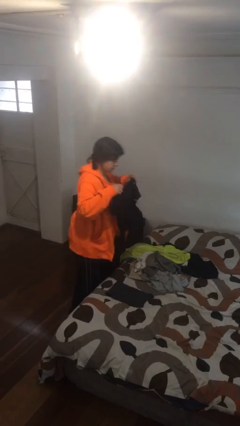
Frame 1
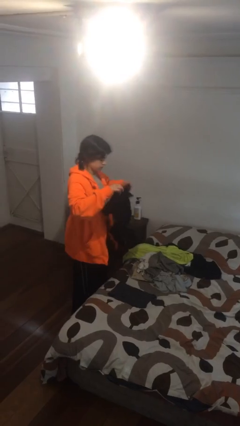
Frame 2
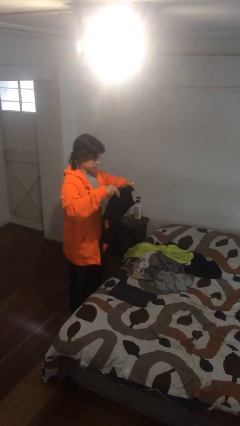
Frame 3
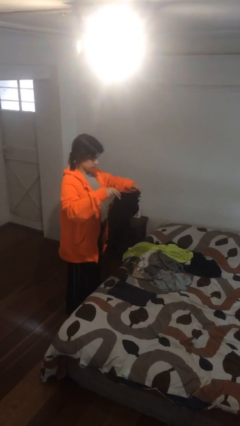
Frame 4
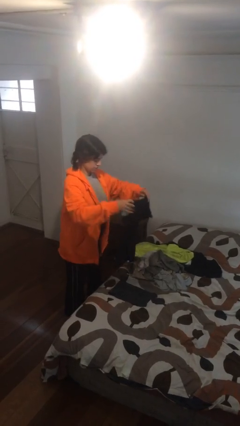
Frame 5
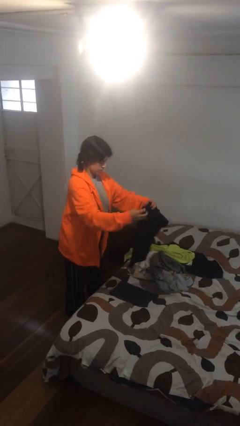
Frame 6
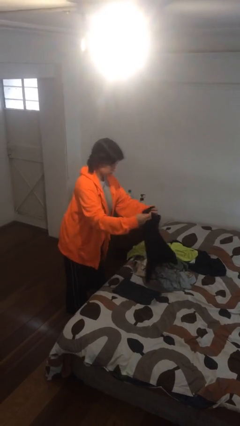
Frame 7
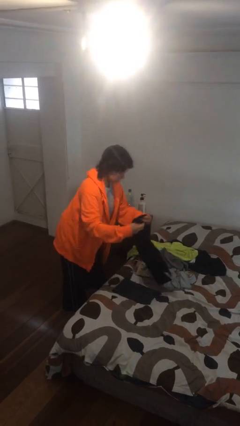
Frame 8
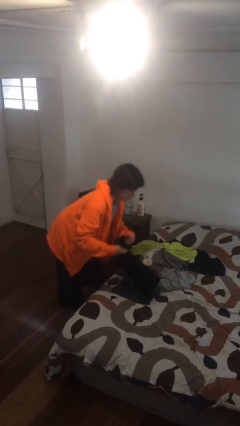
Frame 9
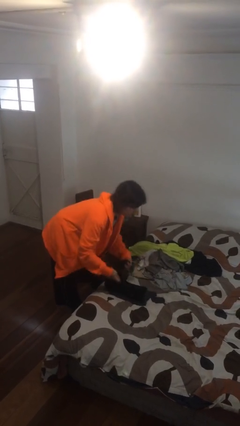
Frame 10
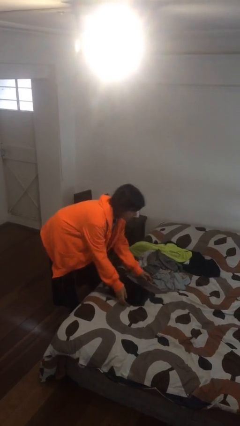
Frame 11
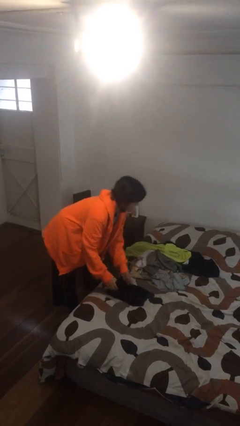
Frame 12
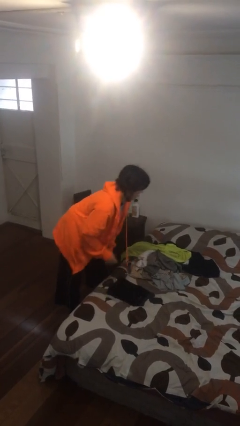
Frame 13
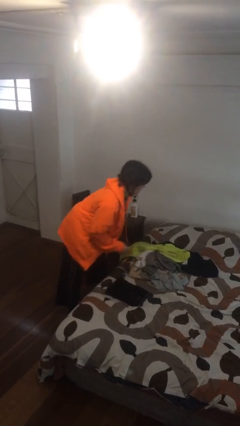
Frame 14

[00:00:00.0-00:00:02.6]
person folds shirt

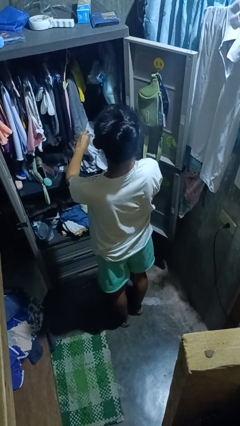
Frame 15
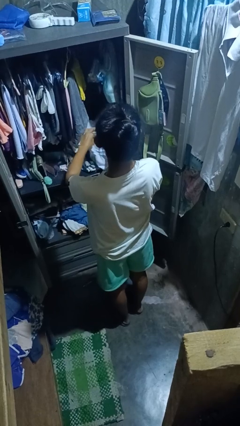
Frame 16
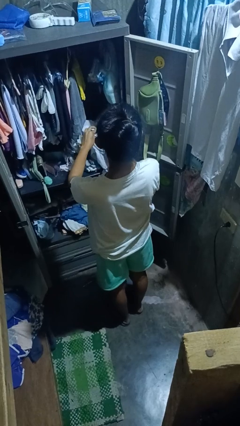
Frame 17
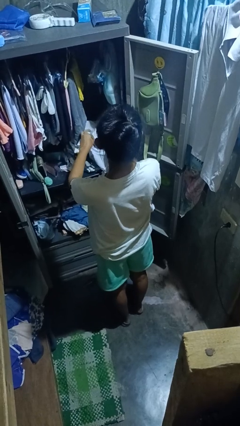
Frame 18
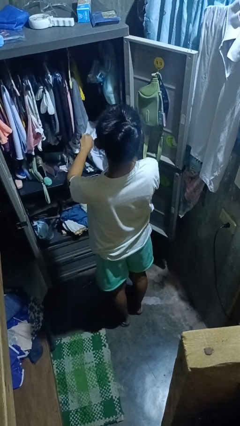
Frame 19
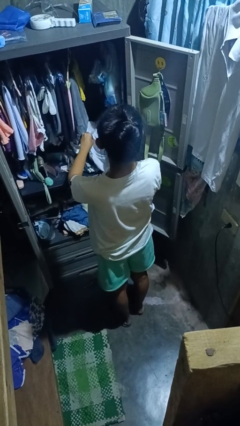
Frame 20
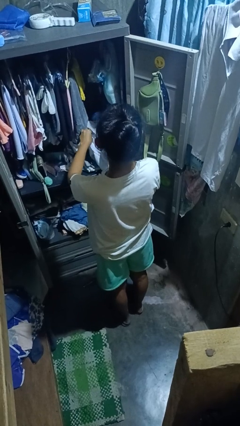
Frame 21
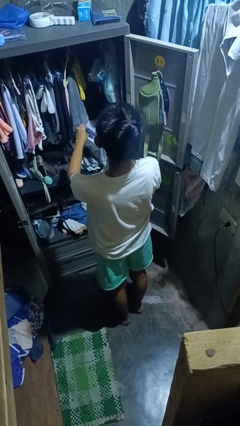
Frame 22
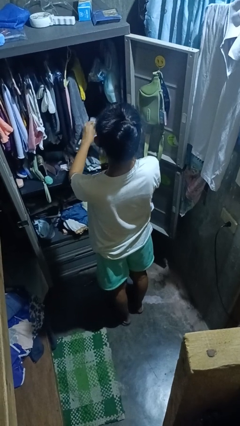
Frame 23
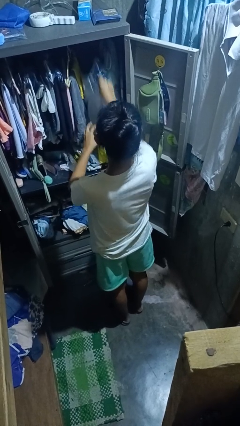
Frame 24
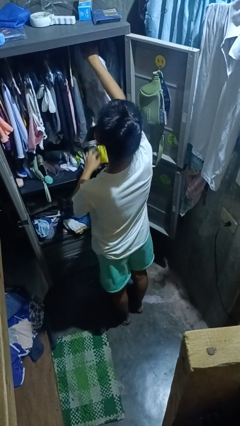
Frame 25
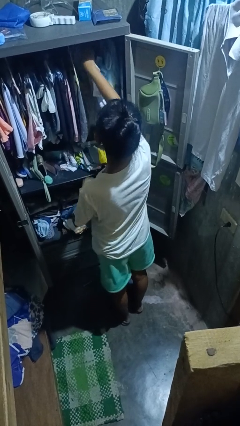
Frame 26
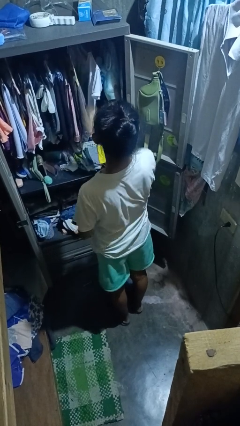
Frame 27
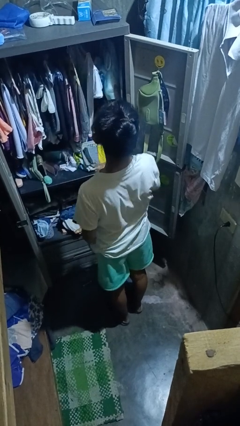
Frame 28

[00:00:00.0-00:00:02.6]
person puts clothes into closet

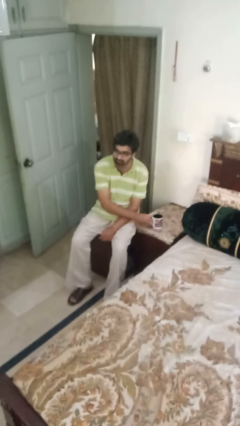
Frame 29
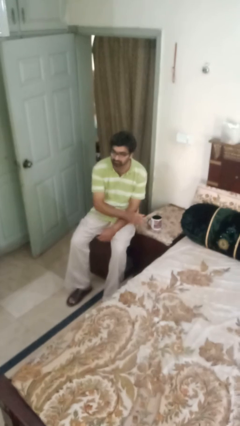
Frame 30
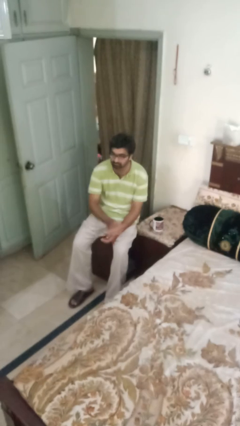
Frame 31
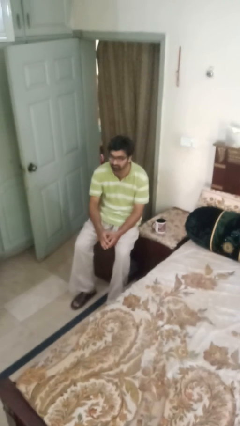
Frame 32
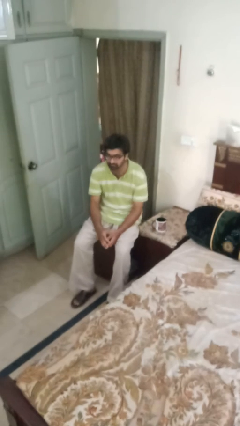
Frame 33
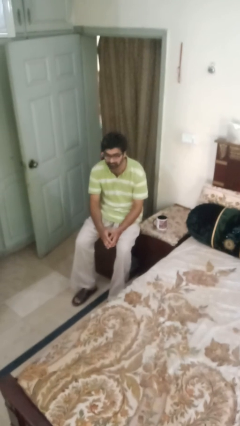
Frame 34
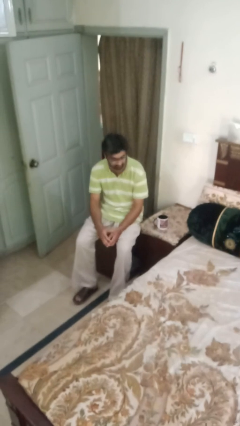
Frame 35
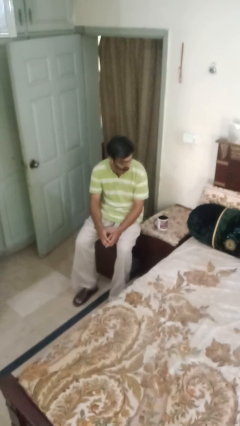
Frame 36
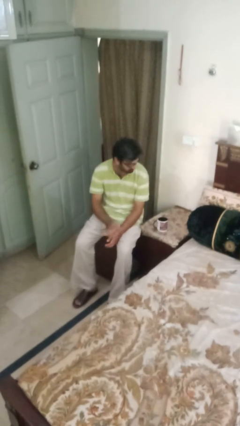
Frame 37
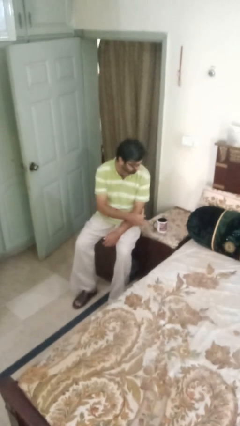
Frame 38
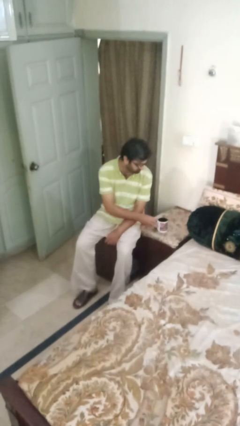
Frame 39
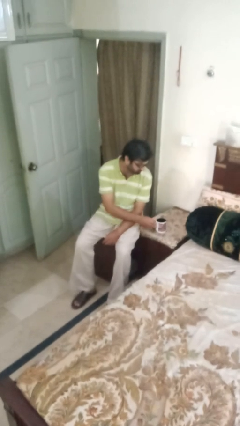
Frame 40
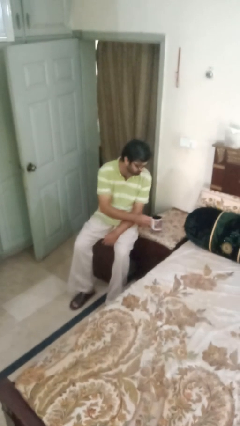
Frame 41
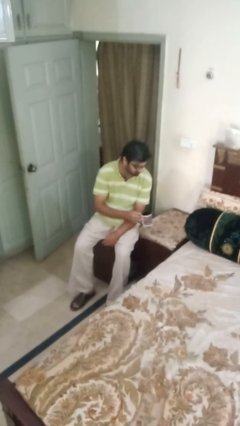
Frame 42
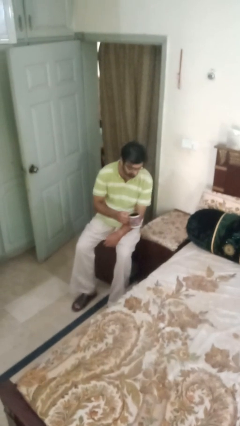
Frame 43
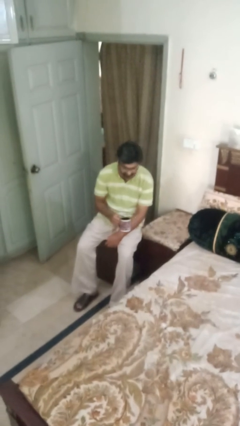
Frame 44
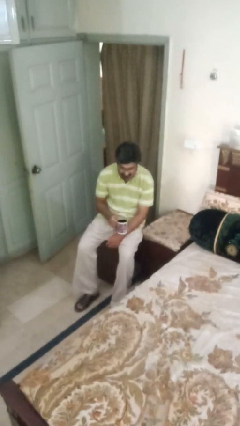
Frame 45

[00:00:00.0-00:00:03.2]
person picks up object from table

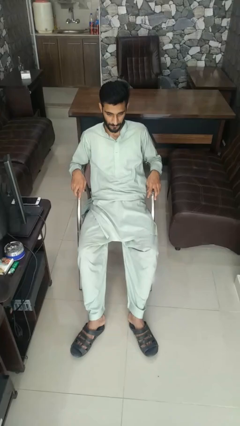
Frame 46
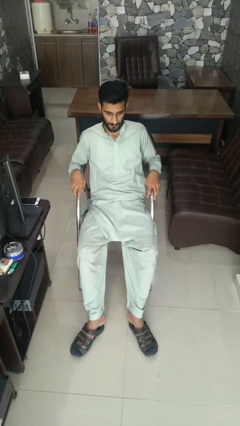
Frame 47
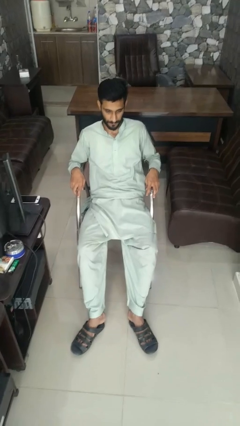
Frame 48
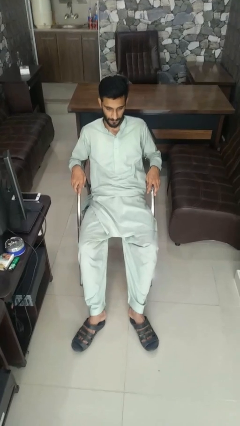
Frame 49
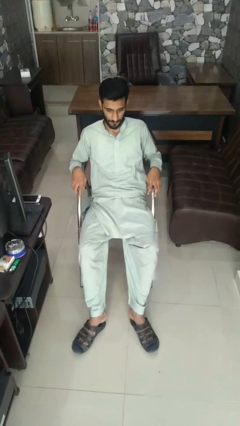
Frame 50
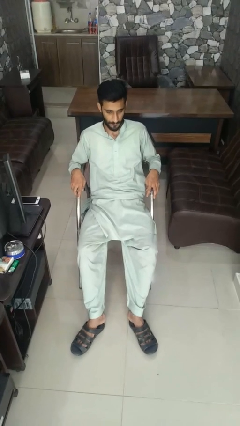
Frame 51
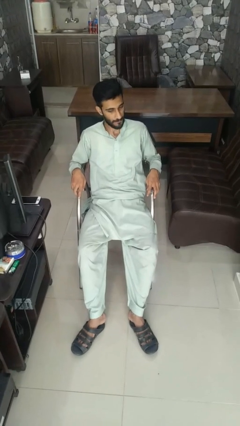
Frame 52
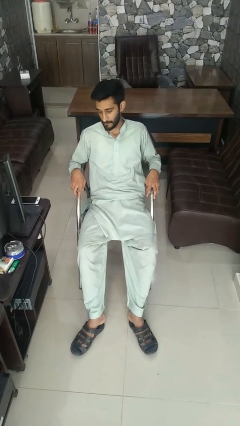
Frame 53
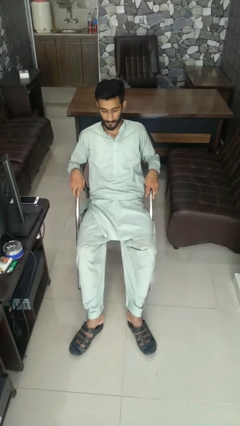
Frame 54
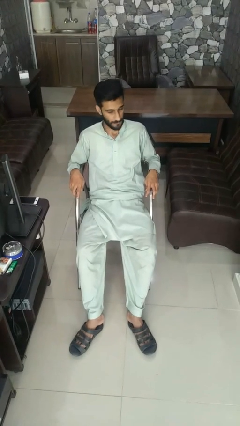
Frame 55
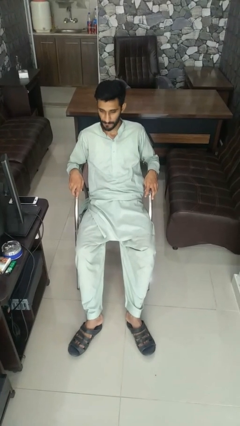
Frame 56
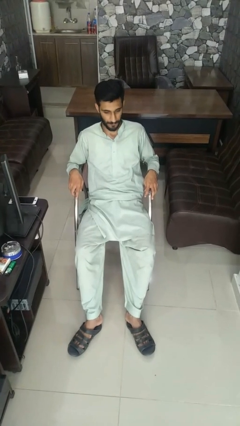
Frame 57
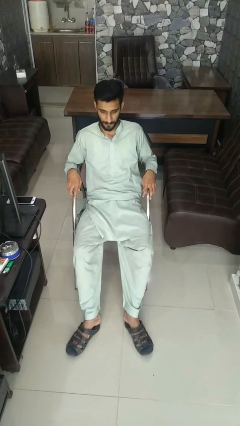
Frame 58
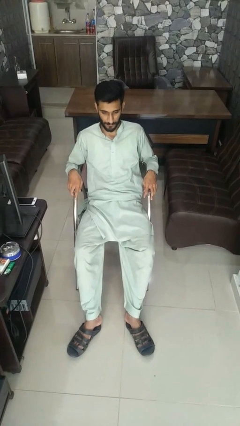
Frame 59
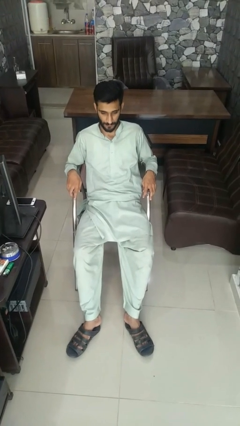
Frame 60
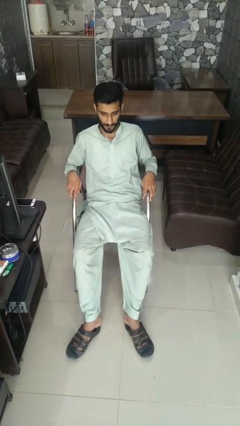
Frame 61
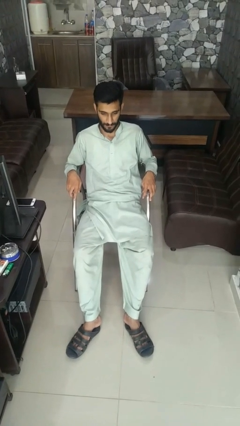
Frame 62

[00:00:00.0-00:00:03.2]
person shakes head

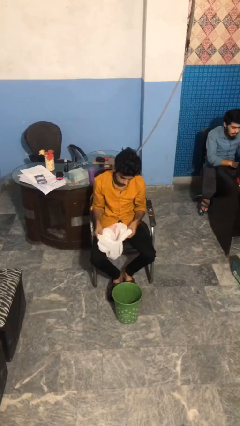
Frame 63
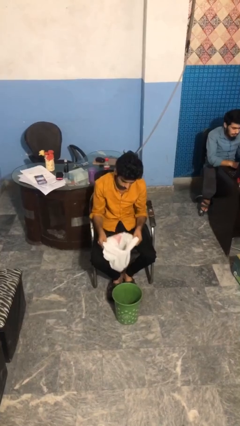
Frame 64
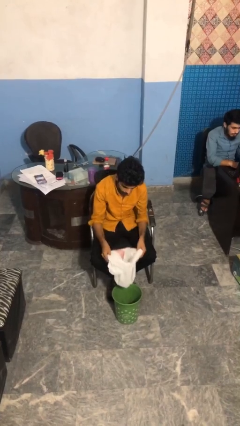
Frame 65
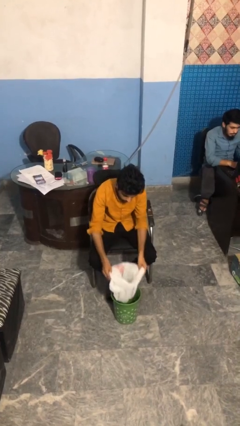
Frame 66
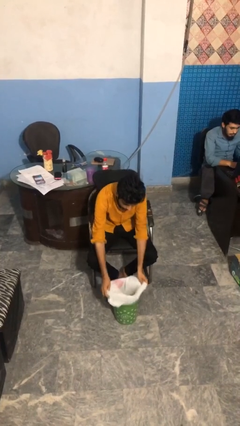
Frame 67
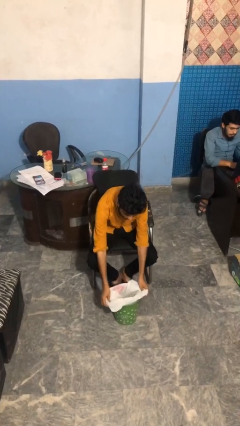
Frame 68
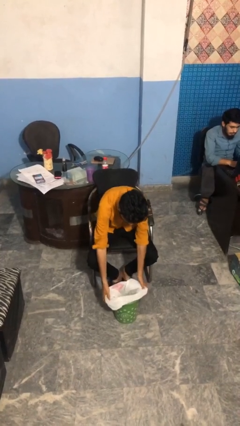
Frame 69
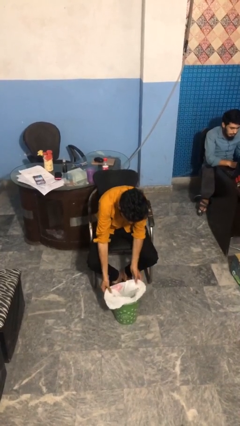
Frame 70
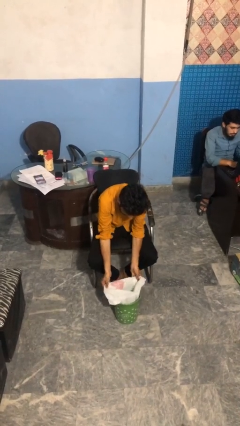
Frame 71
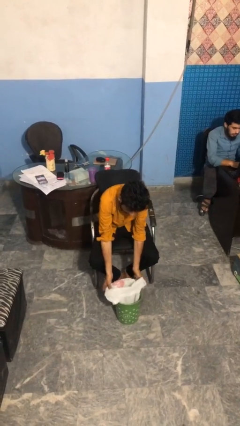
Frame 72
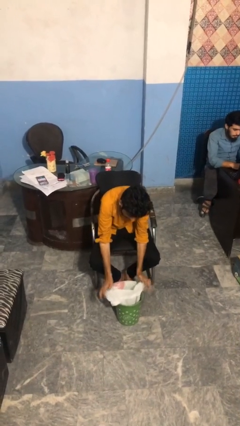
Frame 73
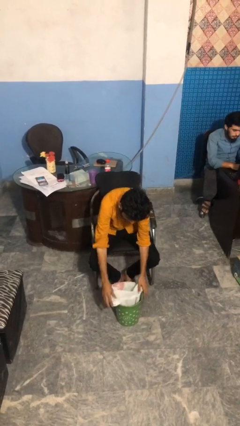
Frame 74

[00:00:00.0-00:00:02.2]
person inserts trashbag into trashcan

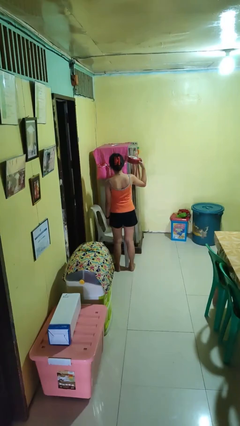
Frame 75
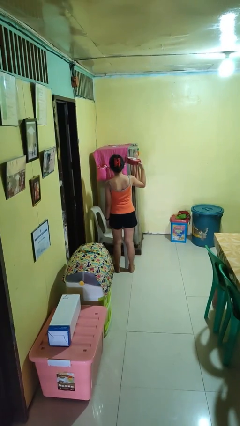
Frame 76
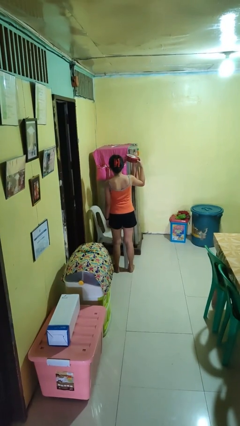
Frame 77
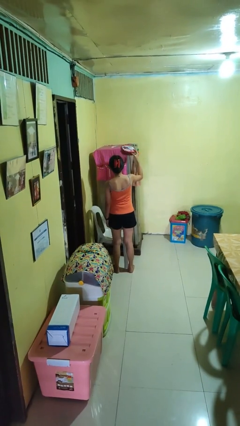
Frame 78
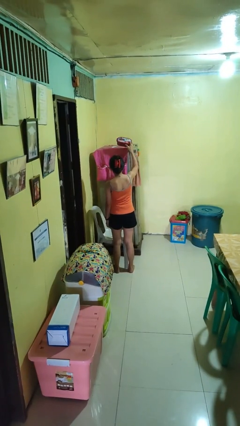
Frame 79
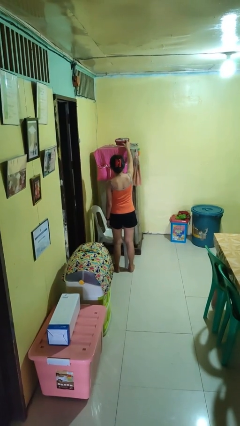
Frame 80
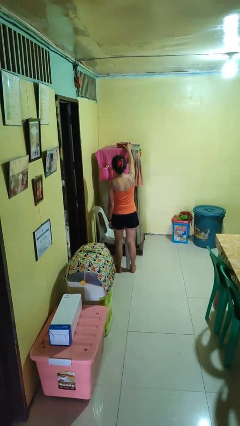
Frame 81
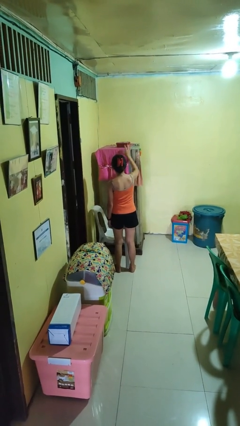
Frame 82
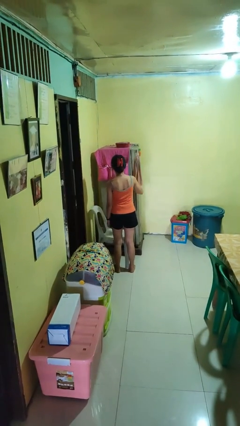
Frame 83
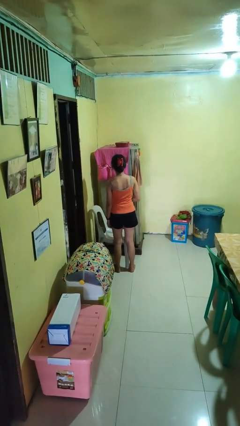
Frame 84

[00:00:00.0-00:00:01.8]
person puts down object on shelf

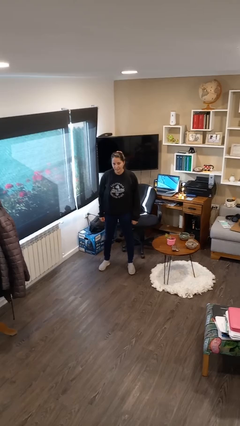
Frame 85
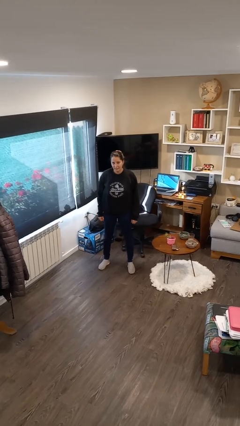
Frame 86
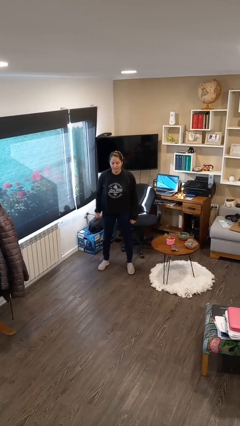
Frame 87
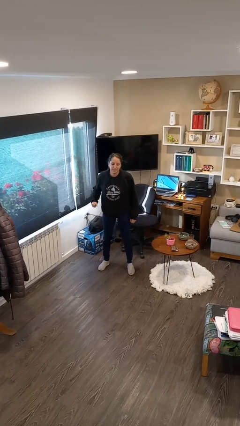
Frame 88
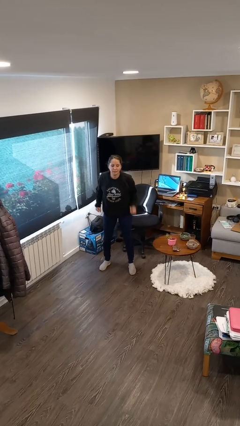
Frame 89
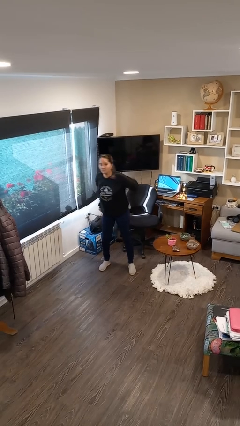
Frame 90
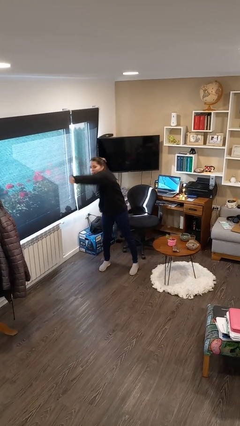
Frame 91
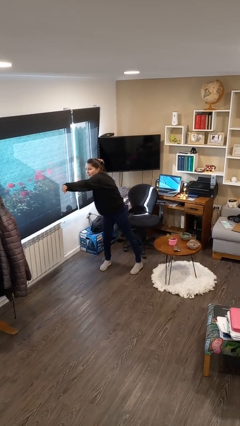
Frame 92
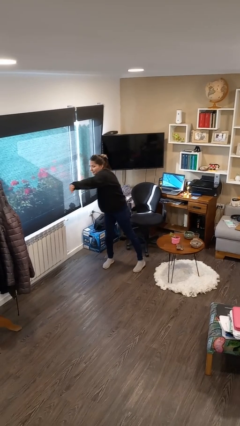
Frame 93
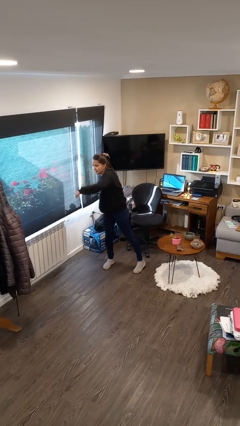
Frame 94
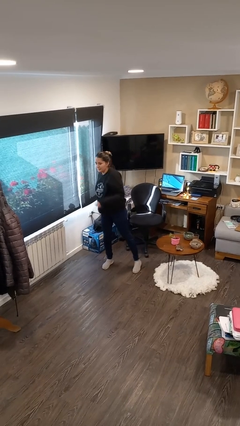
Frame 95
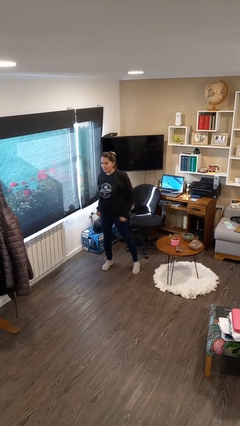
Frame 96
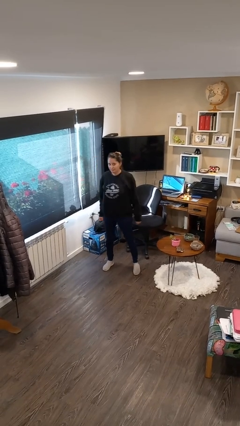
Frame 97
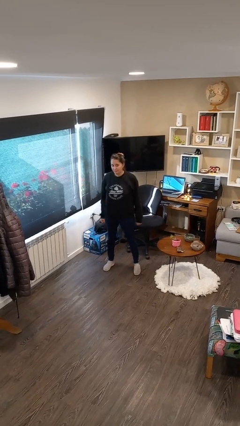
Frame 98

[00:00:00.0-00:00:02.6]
person punches
